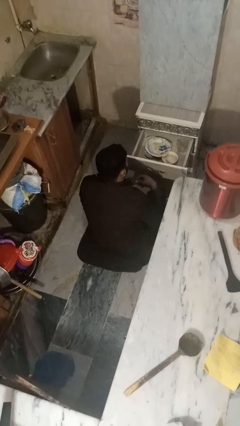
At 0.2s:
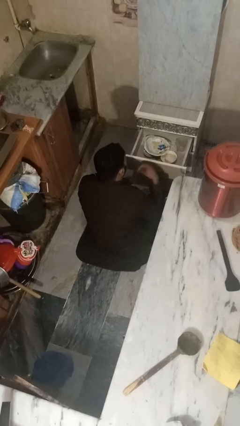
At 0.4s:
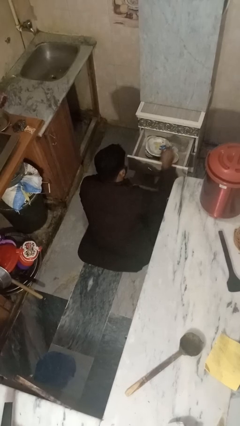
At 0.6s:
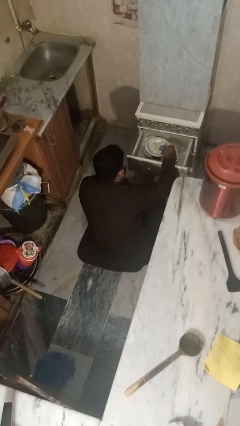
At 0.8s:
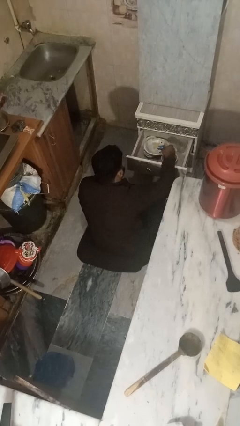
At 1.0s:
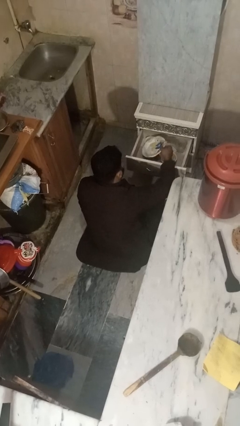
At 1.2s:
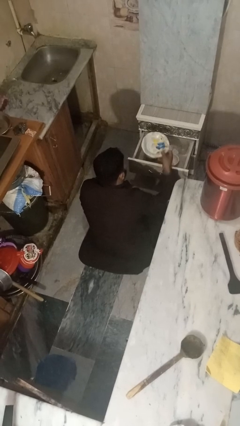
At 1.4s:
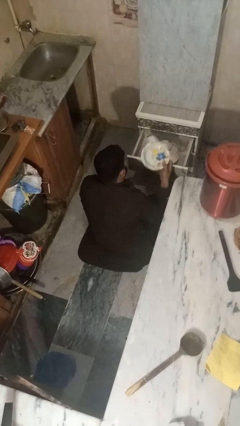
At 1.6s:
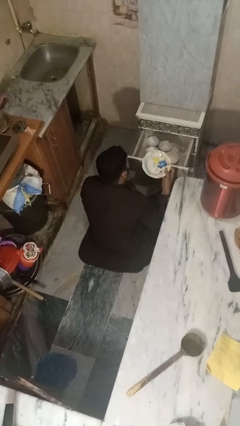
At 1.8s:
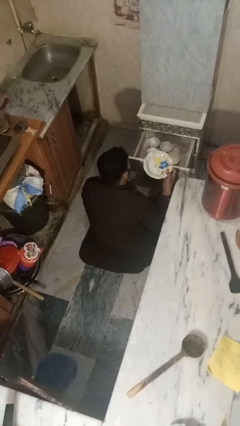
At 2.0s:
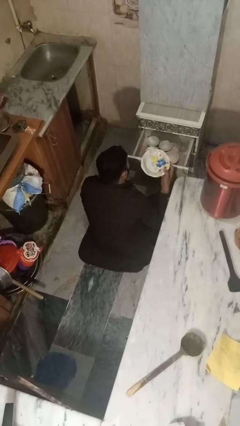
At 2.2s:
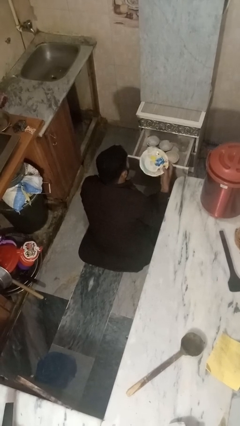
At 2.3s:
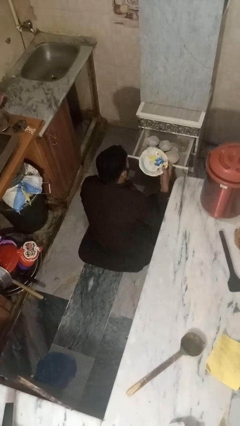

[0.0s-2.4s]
person takes object from kitchen drawer

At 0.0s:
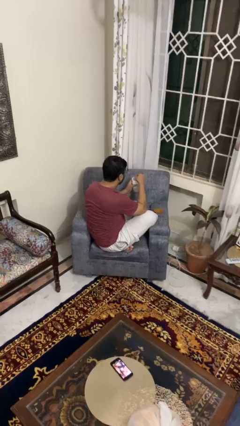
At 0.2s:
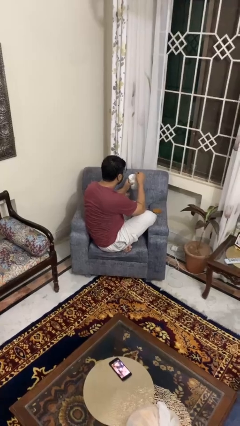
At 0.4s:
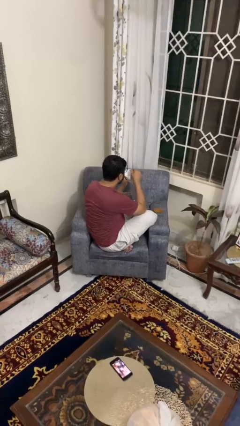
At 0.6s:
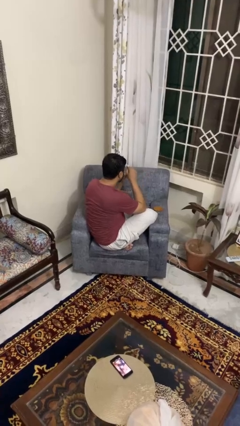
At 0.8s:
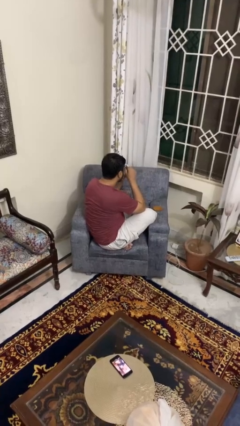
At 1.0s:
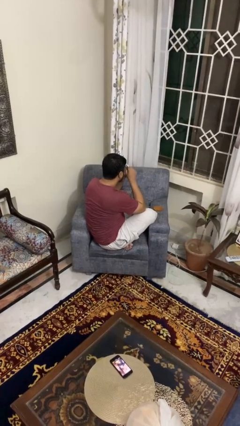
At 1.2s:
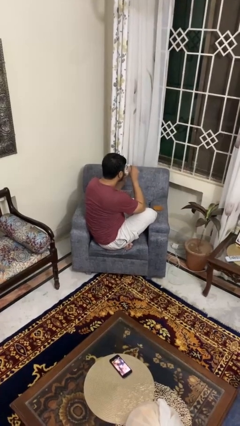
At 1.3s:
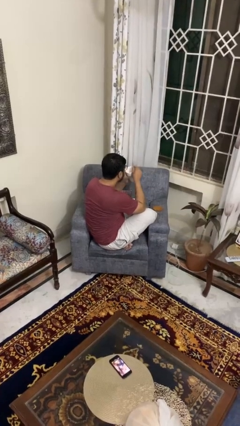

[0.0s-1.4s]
person drinks from mug

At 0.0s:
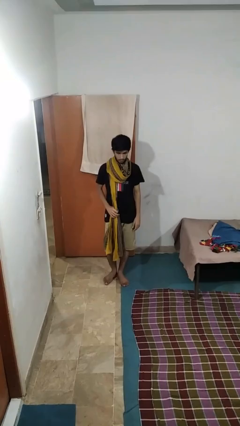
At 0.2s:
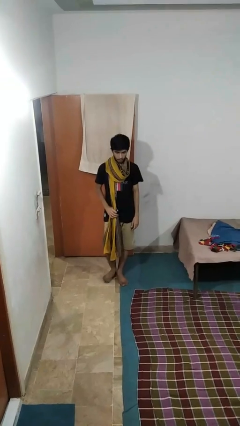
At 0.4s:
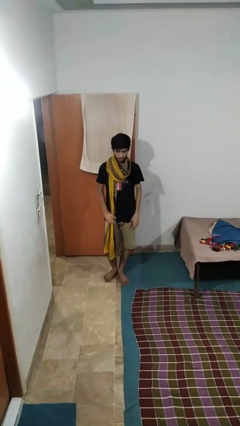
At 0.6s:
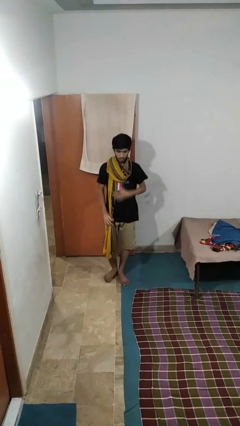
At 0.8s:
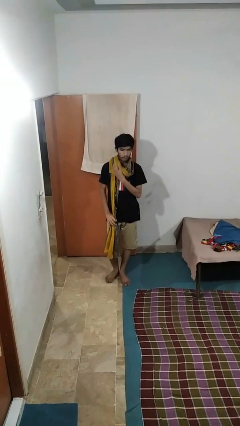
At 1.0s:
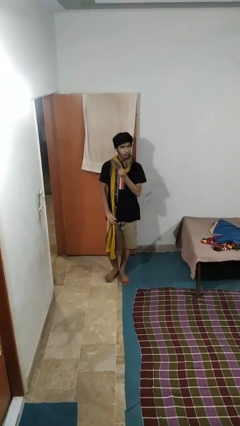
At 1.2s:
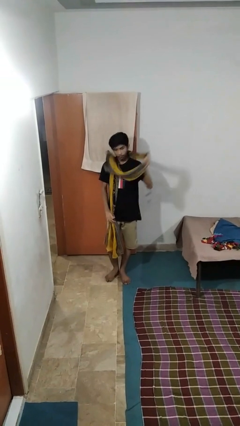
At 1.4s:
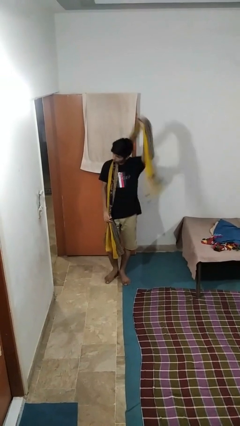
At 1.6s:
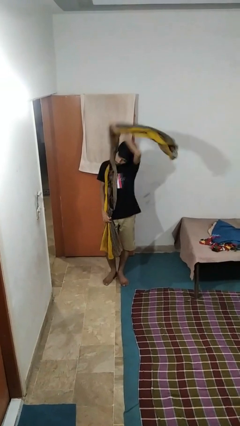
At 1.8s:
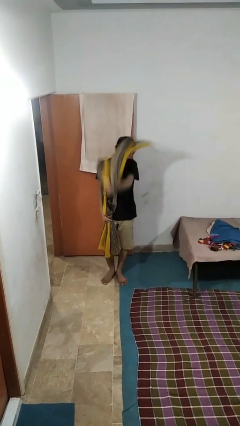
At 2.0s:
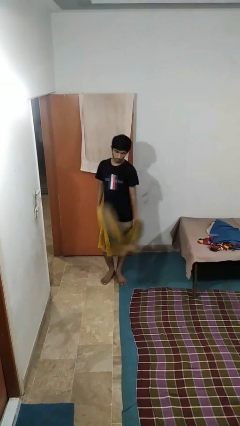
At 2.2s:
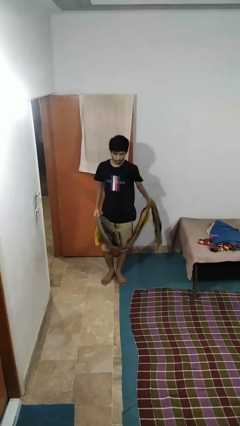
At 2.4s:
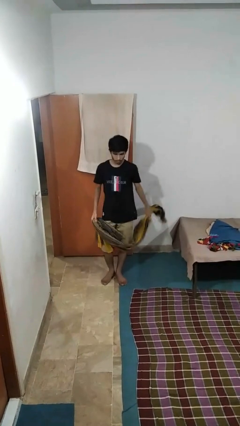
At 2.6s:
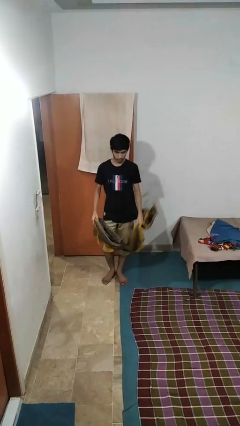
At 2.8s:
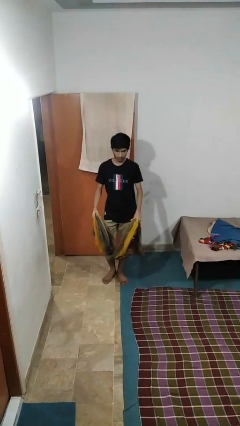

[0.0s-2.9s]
person takes off scarf

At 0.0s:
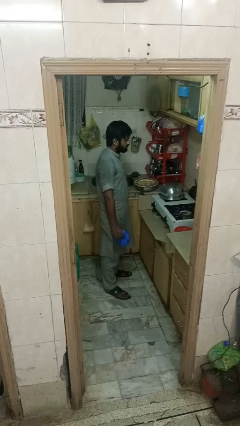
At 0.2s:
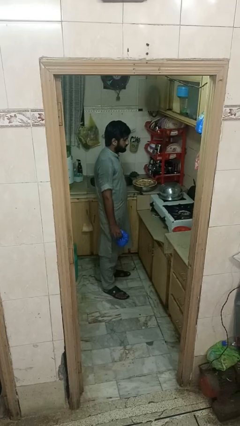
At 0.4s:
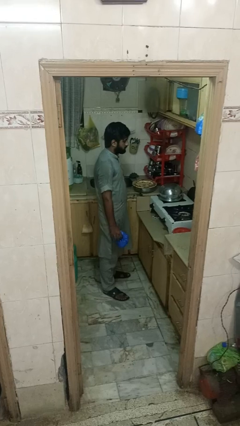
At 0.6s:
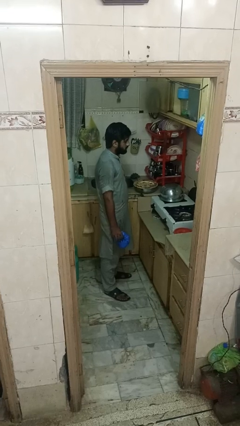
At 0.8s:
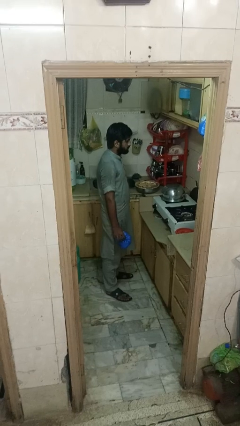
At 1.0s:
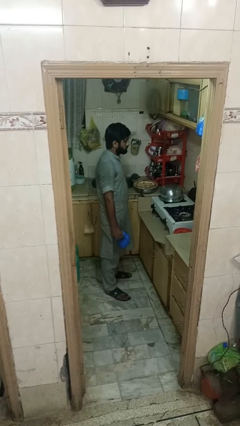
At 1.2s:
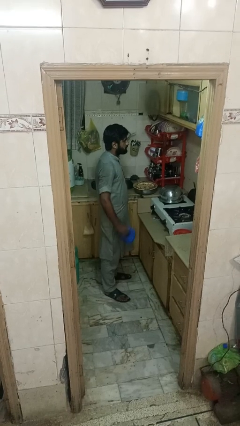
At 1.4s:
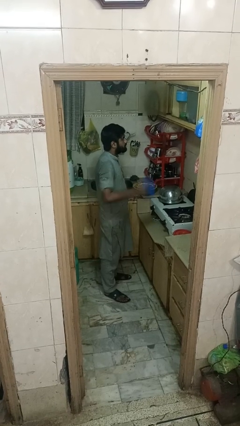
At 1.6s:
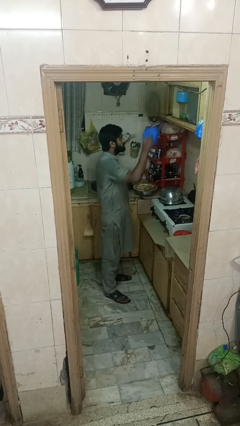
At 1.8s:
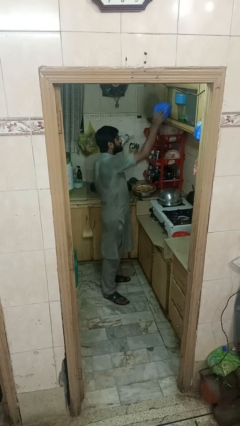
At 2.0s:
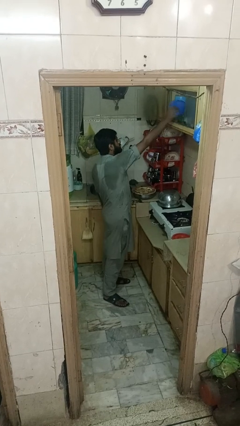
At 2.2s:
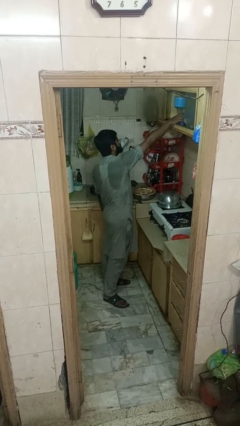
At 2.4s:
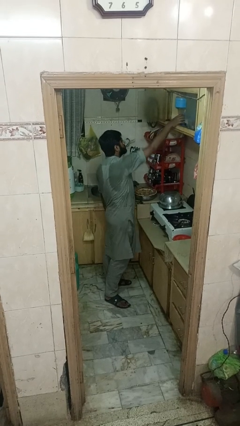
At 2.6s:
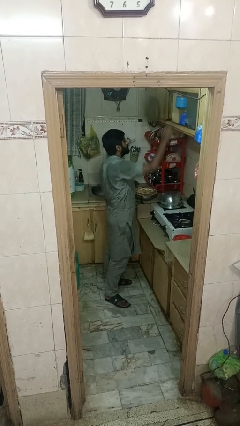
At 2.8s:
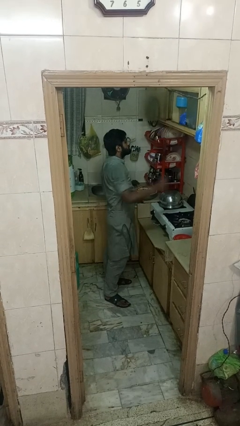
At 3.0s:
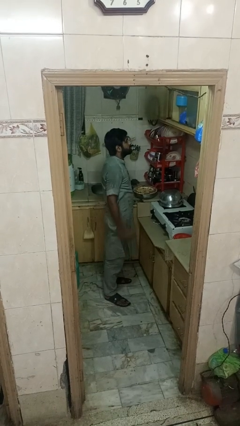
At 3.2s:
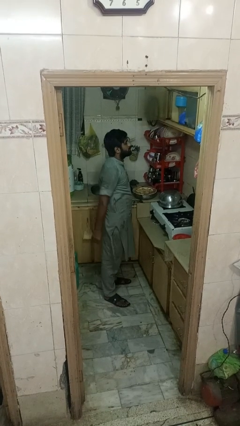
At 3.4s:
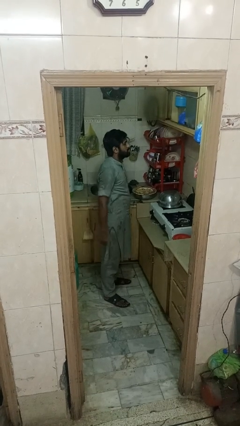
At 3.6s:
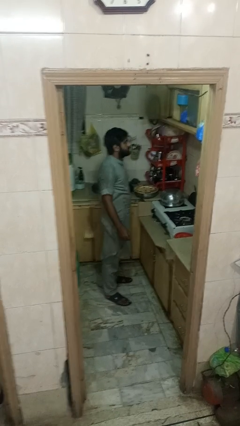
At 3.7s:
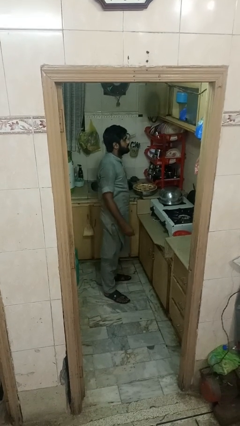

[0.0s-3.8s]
person loads groceries into cabinet

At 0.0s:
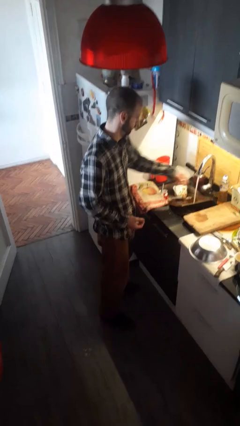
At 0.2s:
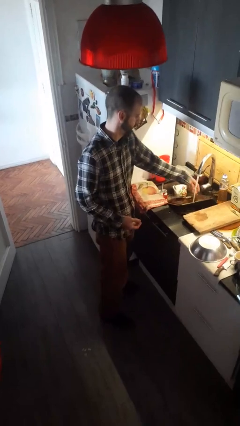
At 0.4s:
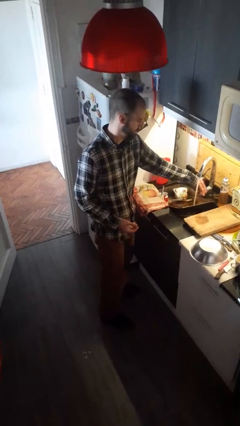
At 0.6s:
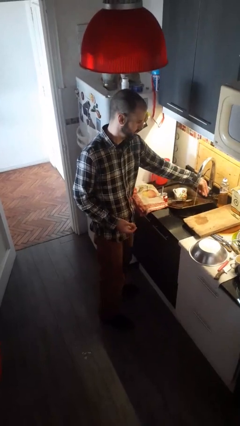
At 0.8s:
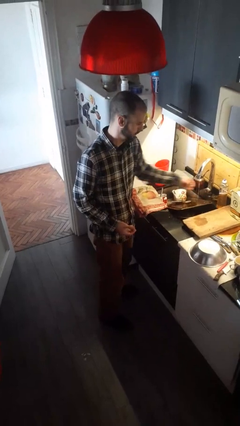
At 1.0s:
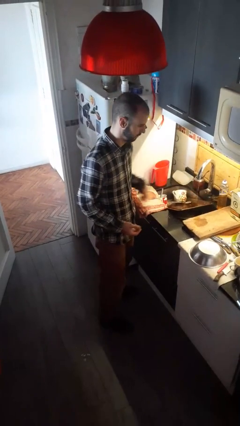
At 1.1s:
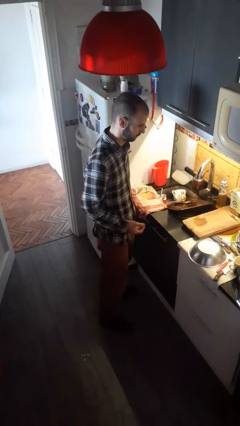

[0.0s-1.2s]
person turns off faucet

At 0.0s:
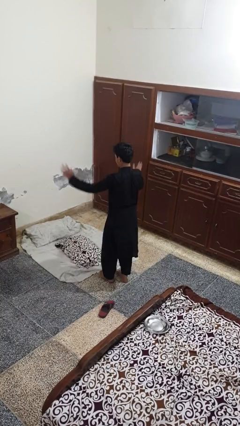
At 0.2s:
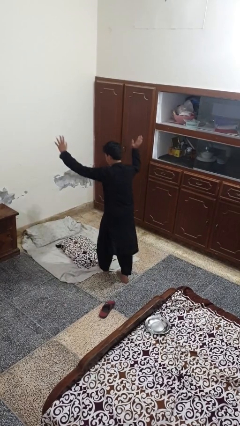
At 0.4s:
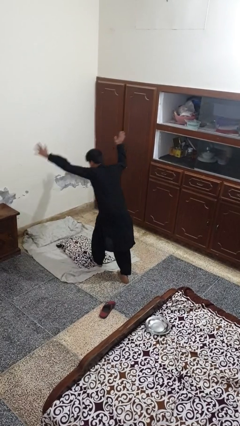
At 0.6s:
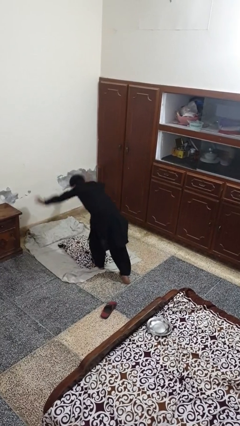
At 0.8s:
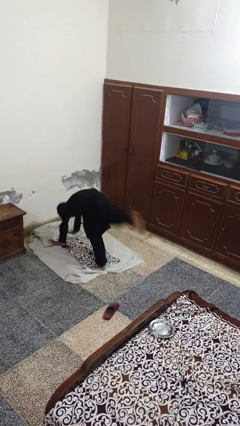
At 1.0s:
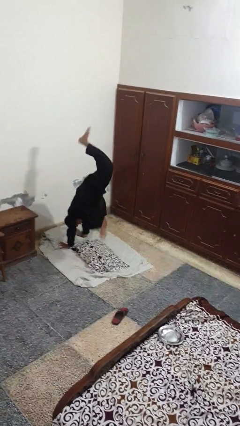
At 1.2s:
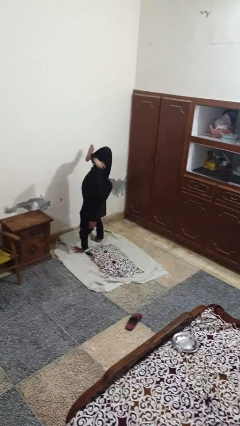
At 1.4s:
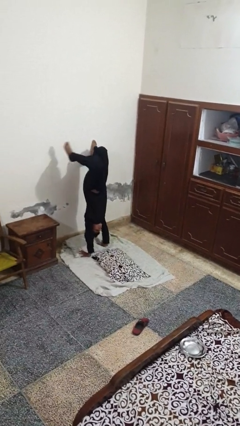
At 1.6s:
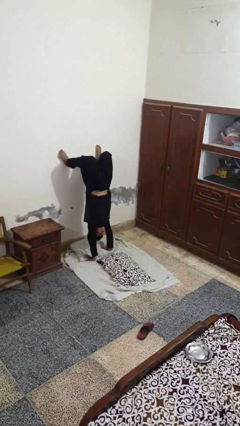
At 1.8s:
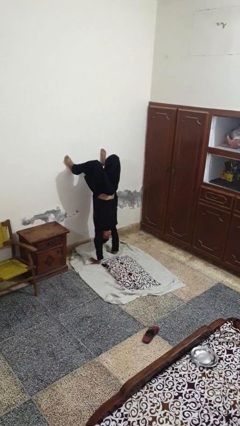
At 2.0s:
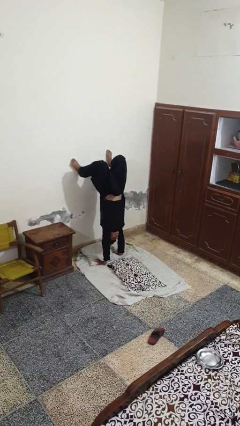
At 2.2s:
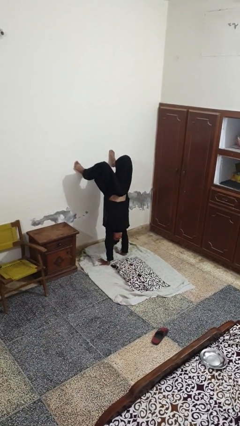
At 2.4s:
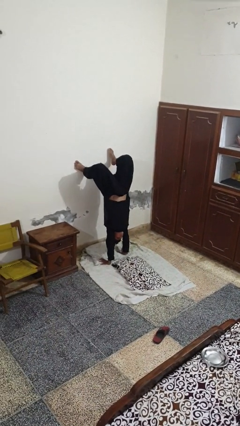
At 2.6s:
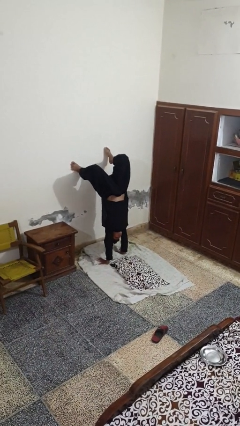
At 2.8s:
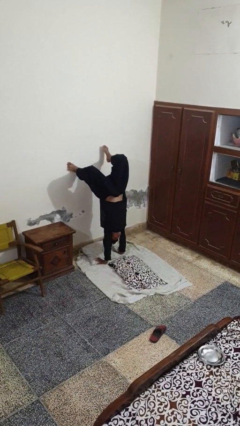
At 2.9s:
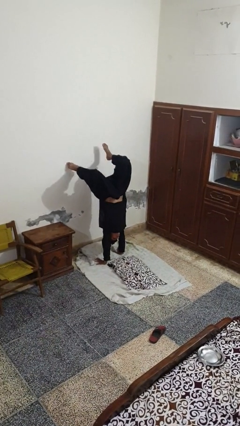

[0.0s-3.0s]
person handstand

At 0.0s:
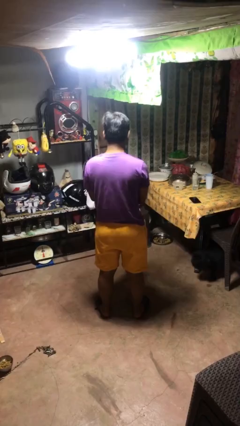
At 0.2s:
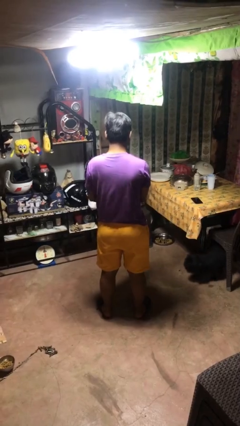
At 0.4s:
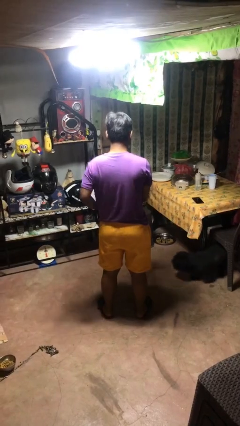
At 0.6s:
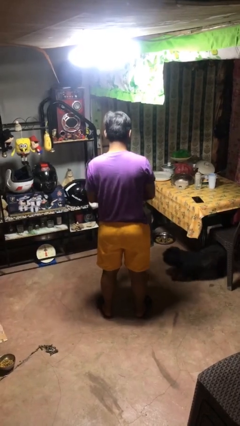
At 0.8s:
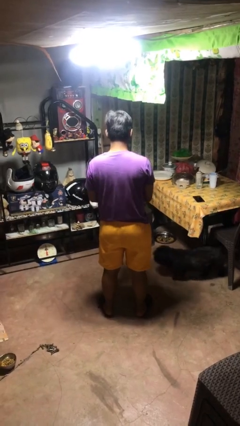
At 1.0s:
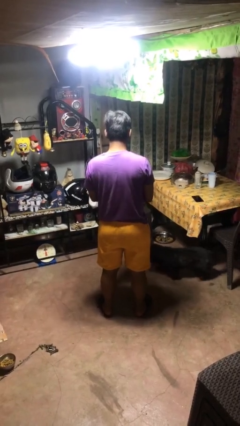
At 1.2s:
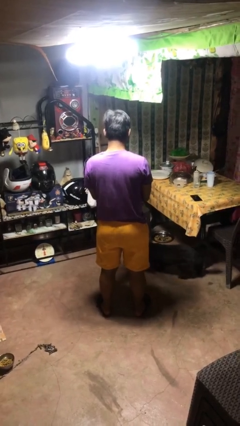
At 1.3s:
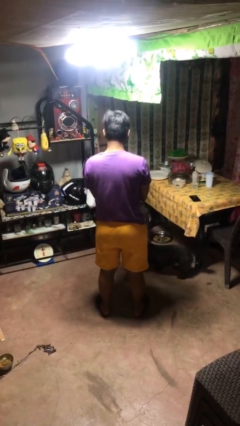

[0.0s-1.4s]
person takes off gloves

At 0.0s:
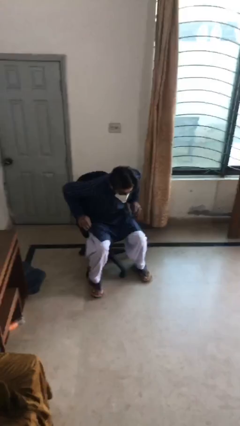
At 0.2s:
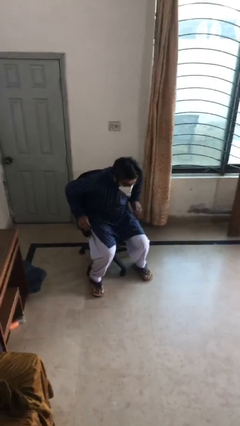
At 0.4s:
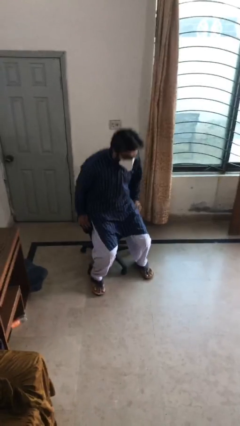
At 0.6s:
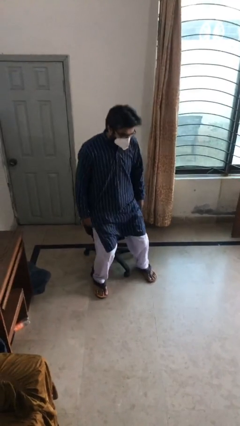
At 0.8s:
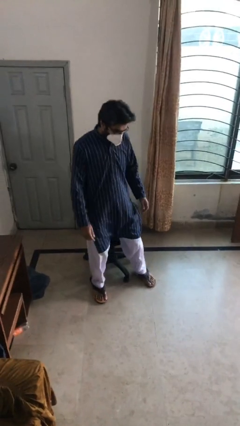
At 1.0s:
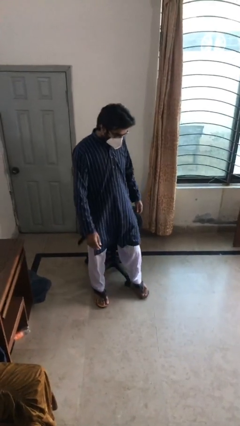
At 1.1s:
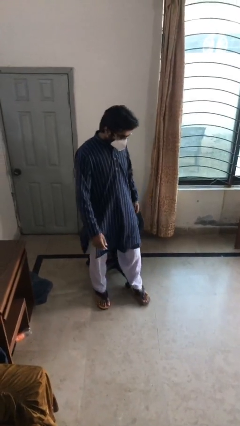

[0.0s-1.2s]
person stands up
